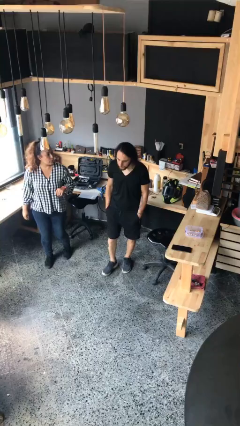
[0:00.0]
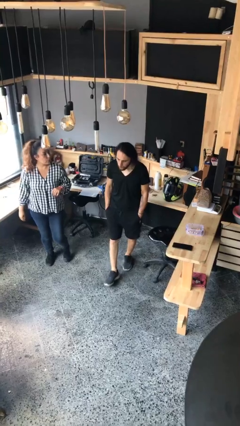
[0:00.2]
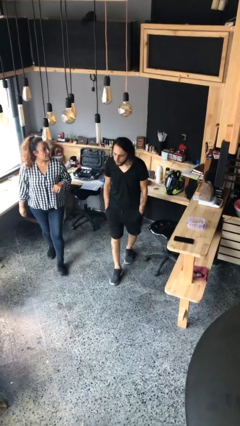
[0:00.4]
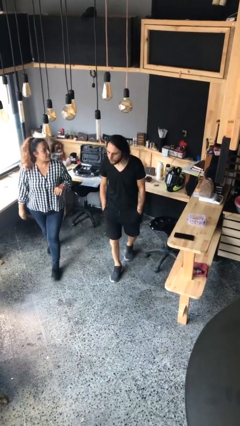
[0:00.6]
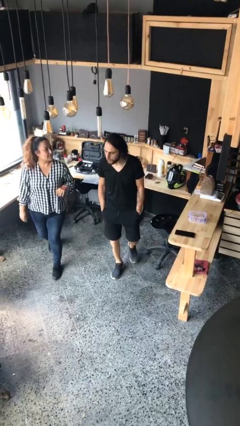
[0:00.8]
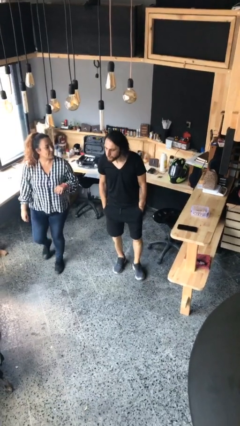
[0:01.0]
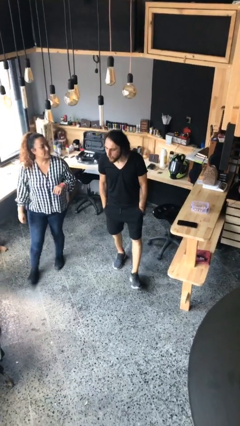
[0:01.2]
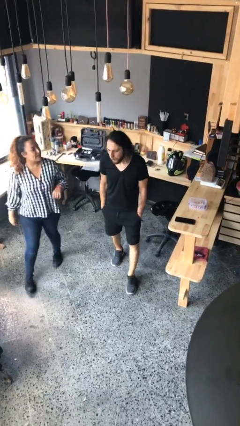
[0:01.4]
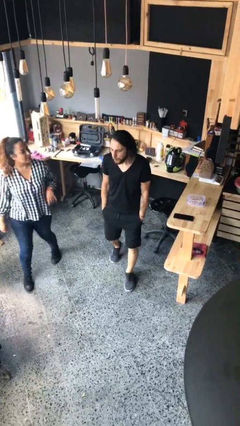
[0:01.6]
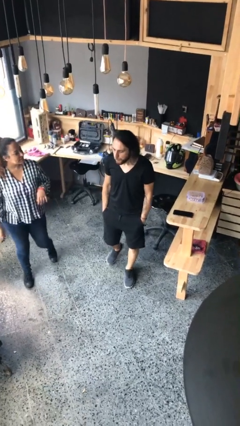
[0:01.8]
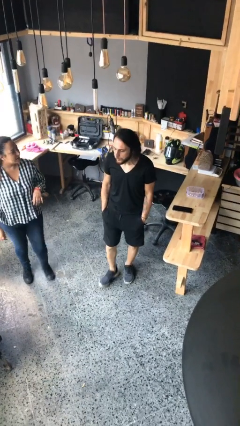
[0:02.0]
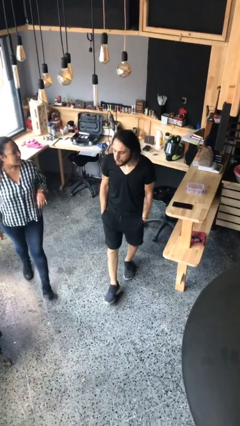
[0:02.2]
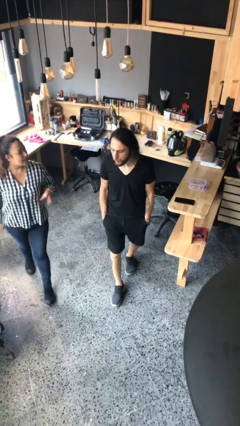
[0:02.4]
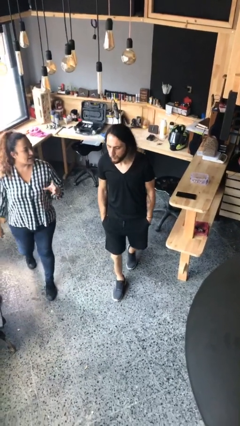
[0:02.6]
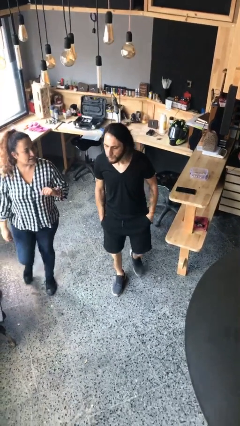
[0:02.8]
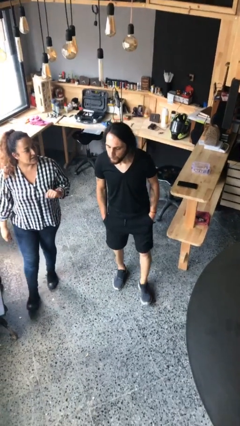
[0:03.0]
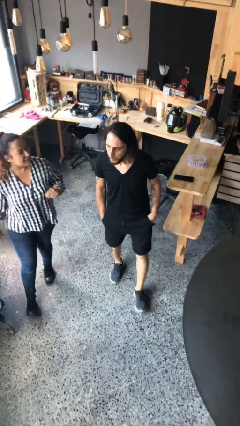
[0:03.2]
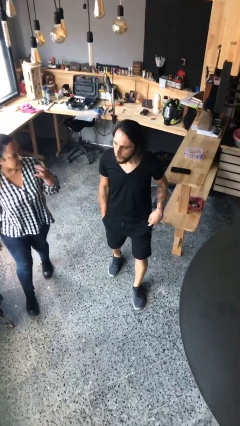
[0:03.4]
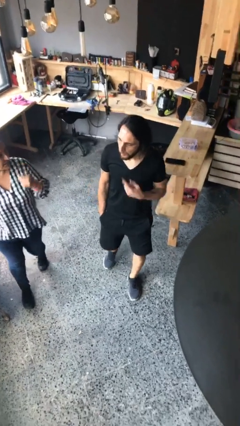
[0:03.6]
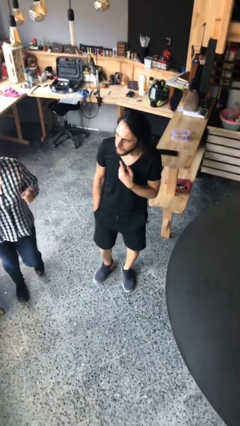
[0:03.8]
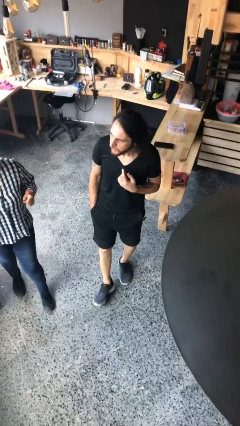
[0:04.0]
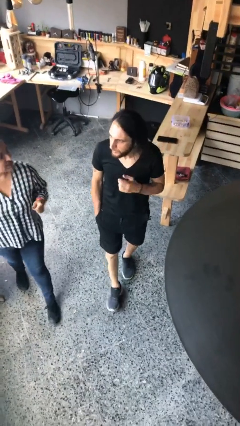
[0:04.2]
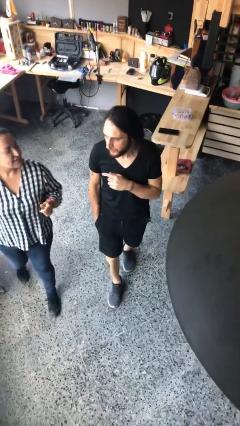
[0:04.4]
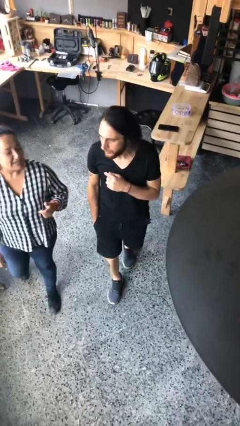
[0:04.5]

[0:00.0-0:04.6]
person talks to person

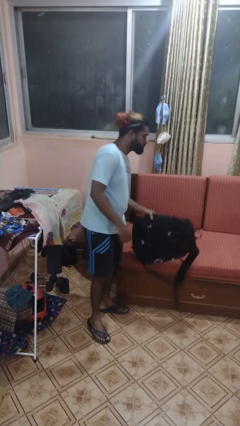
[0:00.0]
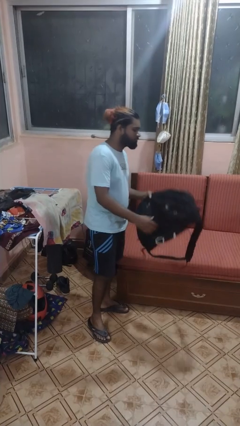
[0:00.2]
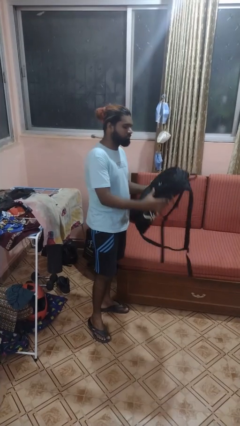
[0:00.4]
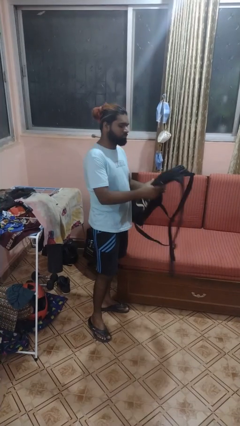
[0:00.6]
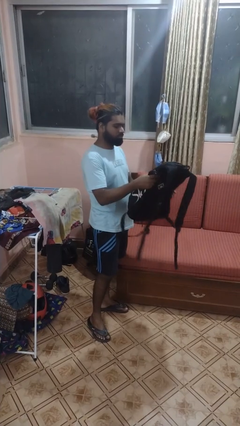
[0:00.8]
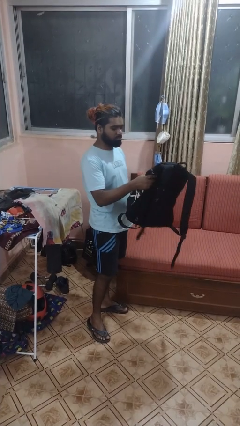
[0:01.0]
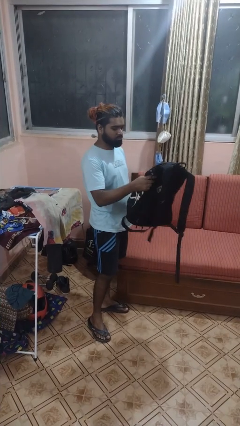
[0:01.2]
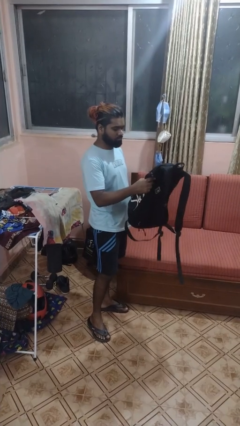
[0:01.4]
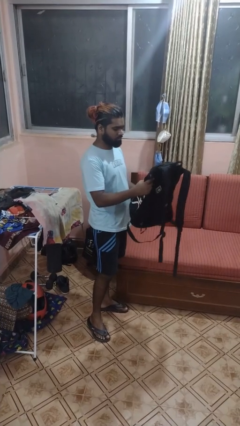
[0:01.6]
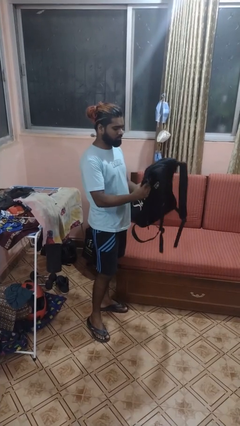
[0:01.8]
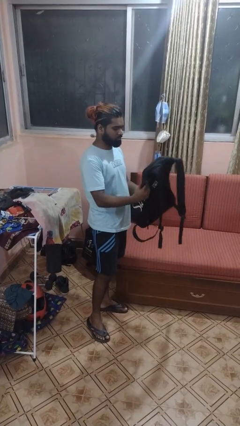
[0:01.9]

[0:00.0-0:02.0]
person picks up object from couch

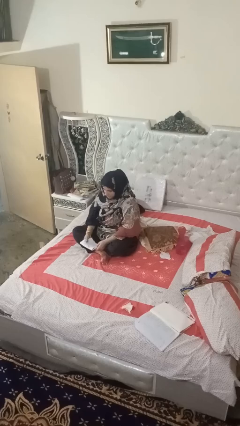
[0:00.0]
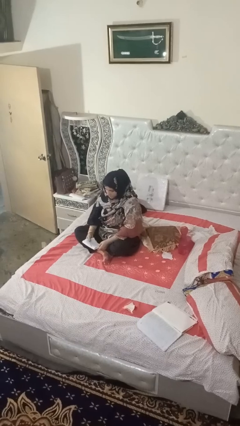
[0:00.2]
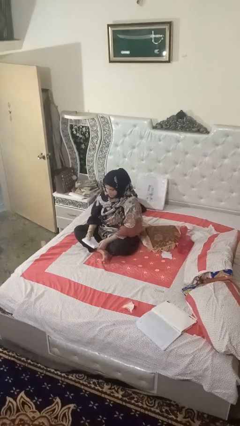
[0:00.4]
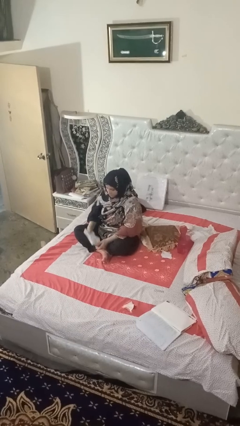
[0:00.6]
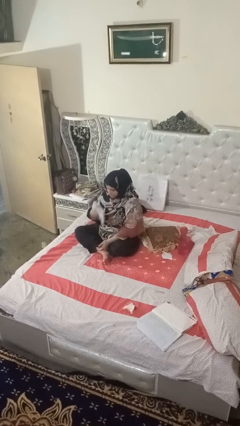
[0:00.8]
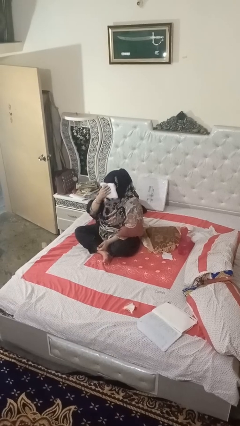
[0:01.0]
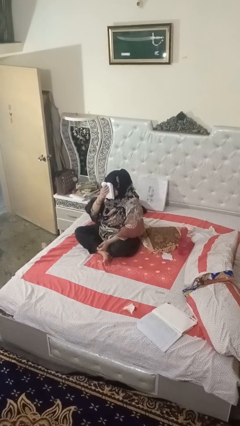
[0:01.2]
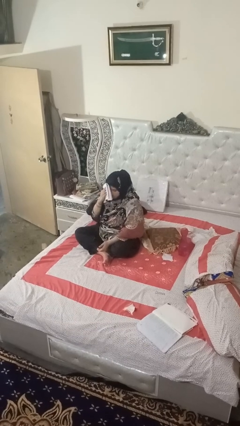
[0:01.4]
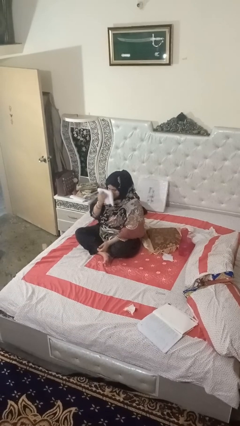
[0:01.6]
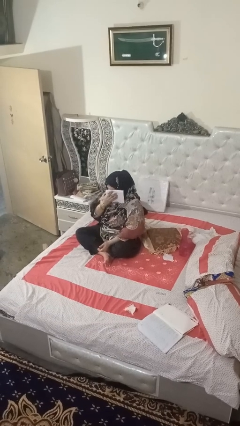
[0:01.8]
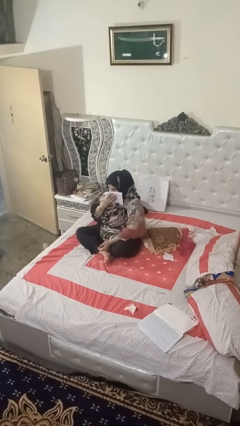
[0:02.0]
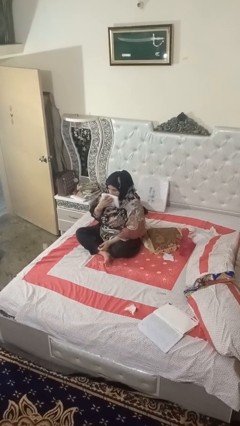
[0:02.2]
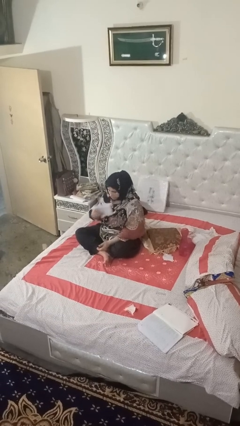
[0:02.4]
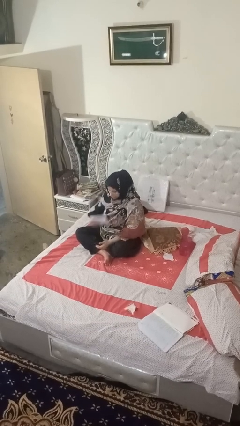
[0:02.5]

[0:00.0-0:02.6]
person wipes mouth with napkin

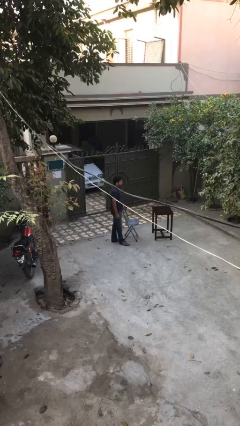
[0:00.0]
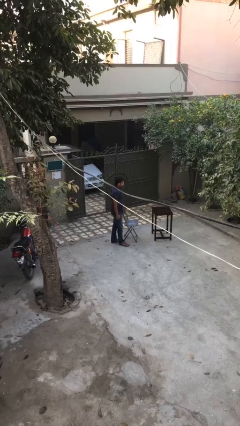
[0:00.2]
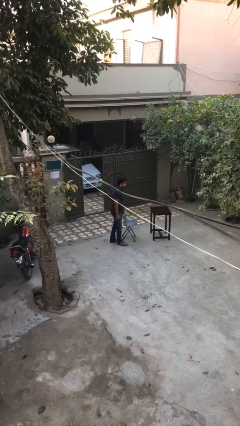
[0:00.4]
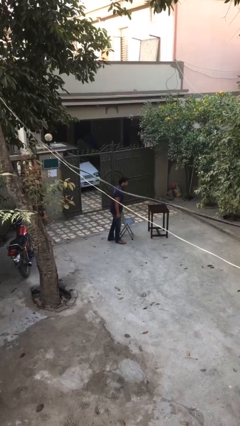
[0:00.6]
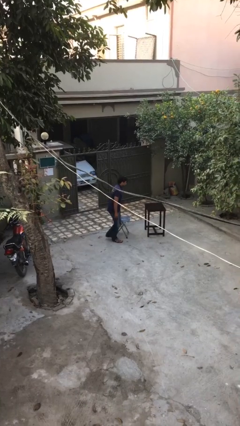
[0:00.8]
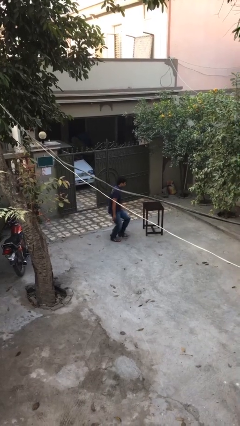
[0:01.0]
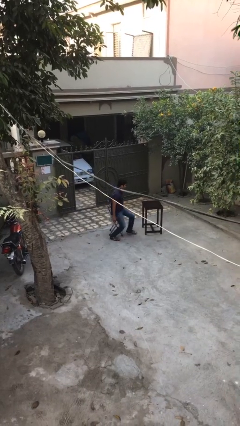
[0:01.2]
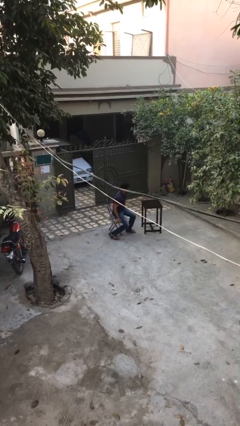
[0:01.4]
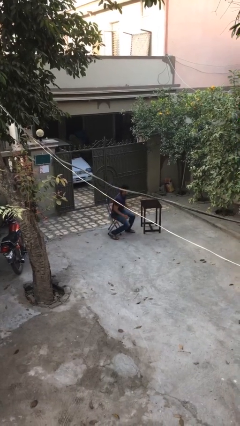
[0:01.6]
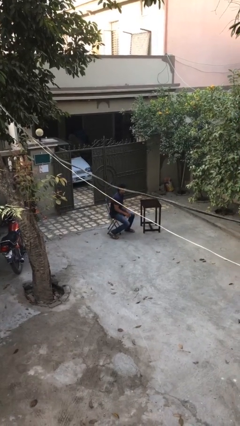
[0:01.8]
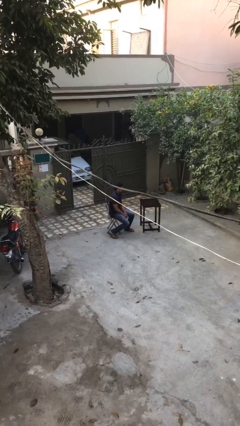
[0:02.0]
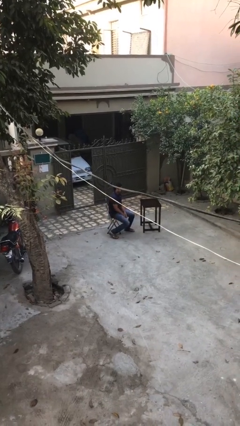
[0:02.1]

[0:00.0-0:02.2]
person sits down

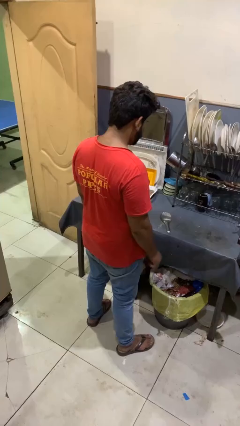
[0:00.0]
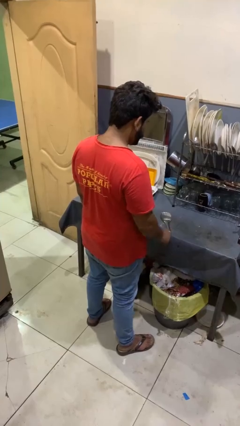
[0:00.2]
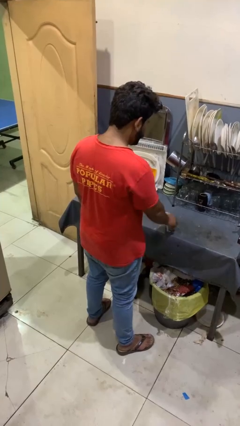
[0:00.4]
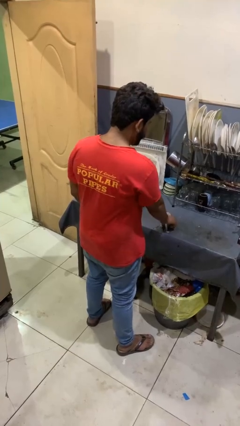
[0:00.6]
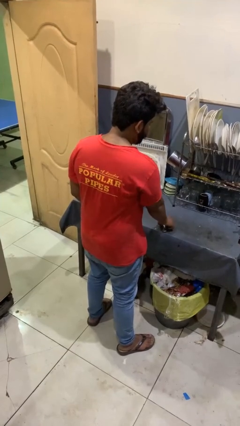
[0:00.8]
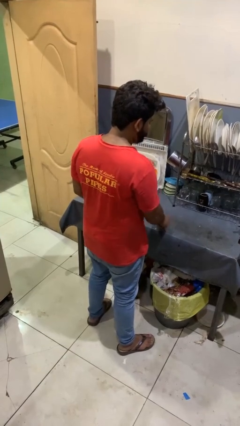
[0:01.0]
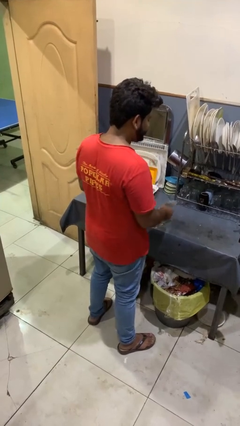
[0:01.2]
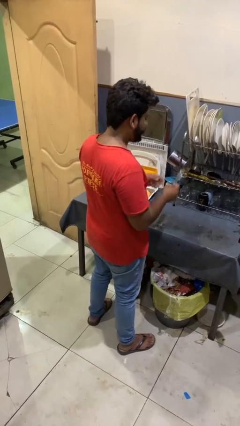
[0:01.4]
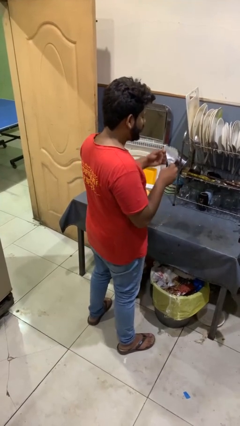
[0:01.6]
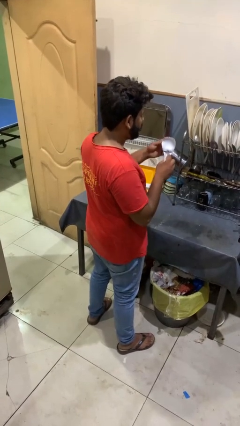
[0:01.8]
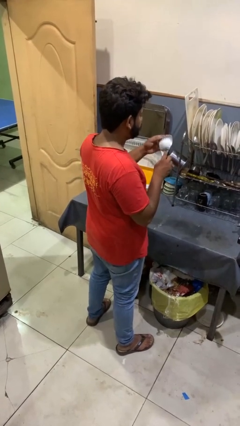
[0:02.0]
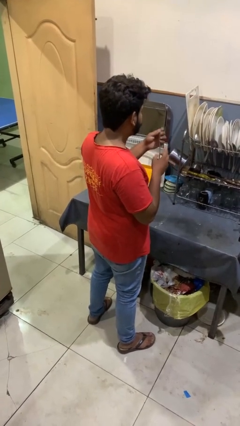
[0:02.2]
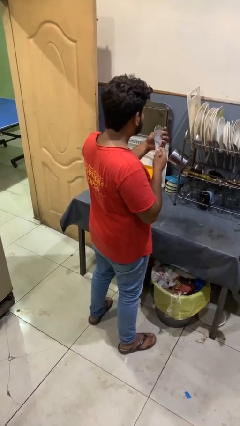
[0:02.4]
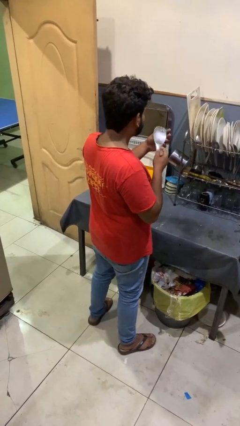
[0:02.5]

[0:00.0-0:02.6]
person picks up object from countertop

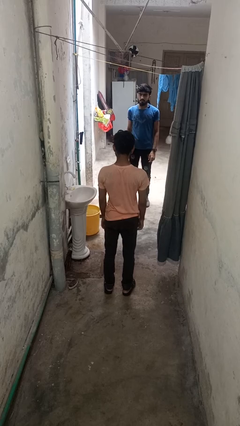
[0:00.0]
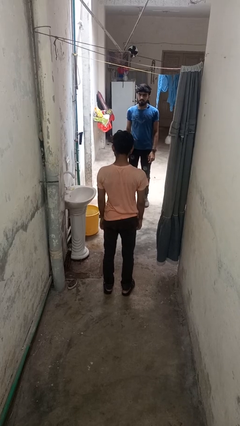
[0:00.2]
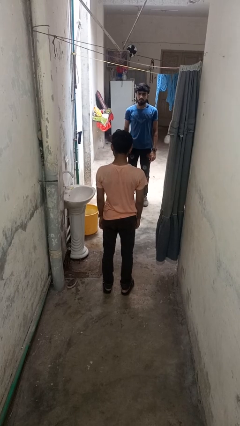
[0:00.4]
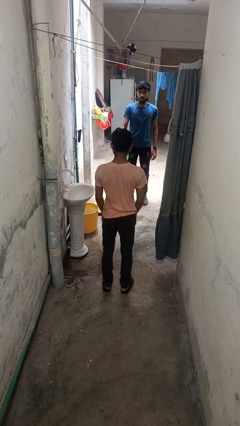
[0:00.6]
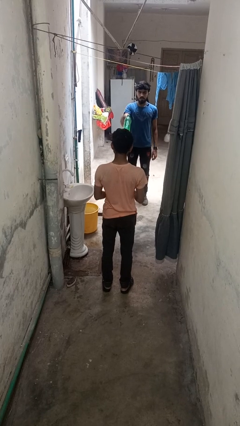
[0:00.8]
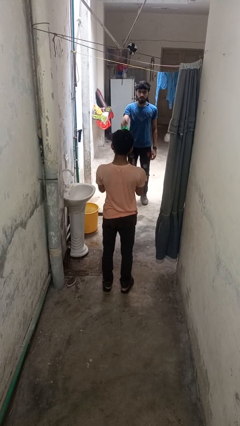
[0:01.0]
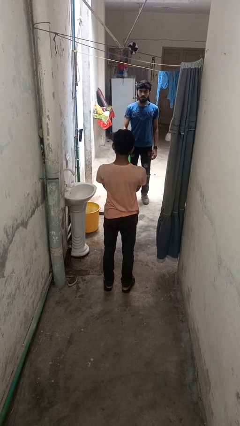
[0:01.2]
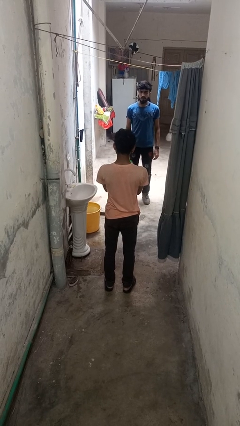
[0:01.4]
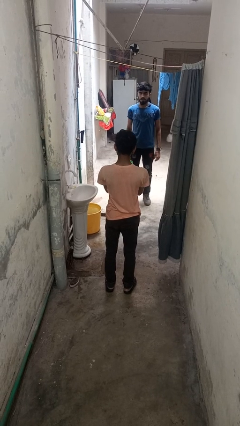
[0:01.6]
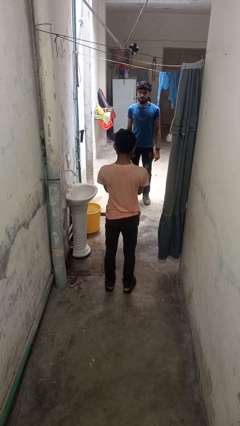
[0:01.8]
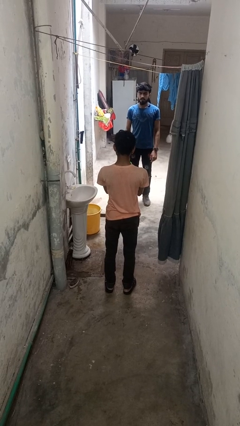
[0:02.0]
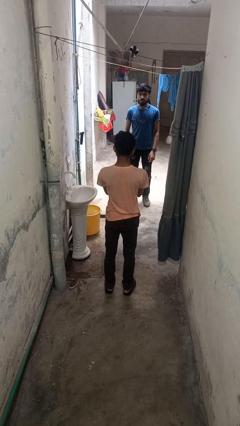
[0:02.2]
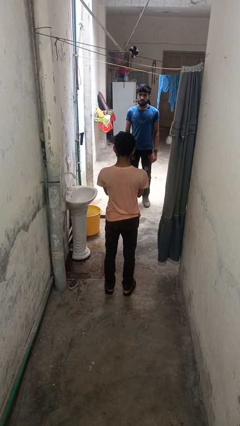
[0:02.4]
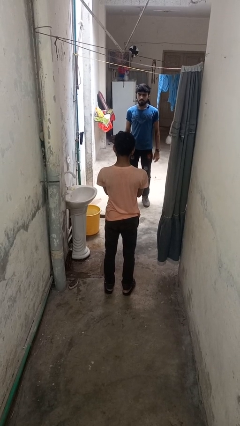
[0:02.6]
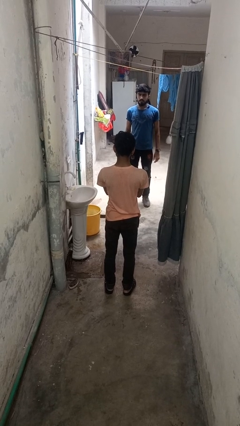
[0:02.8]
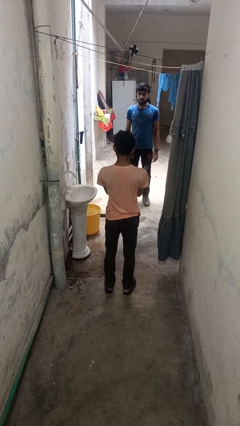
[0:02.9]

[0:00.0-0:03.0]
person catches object from person
